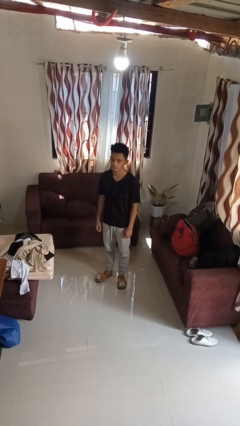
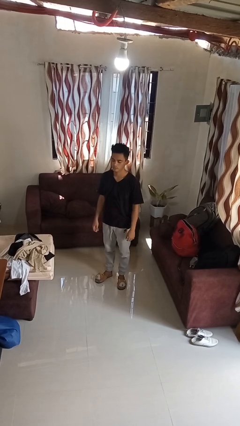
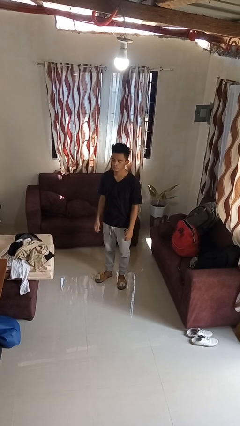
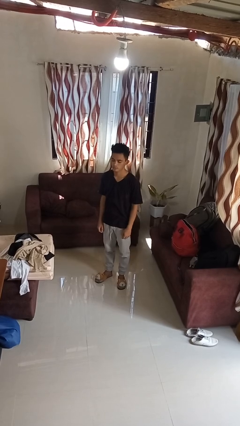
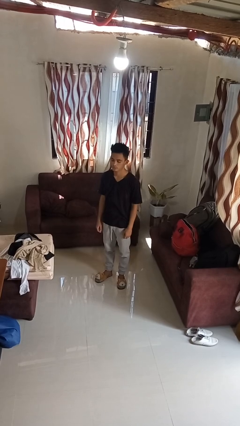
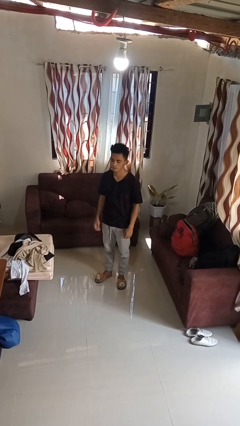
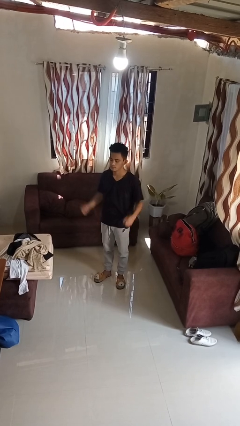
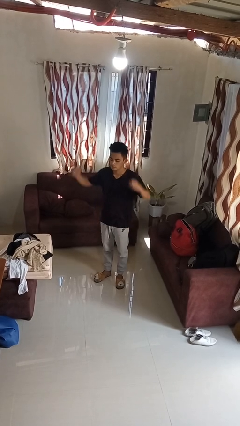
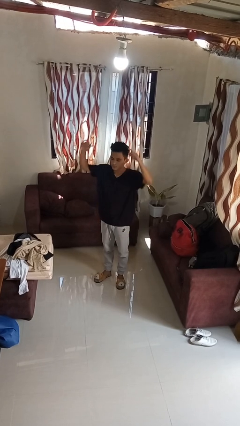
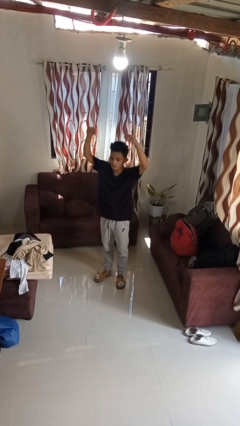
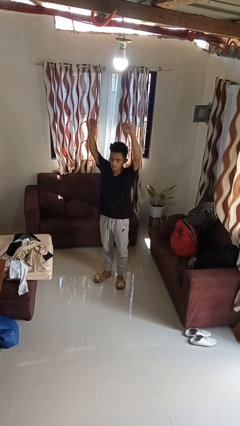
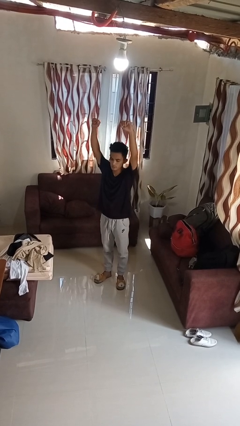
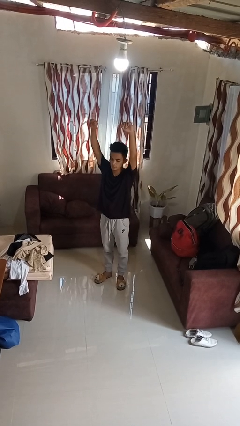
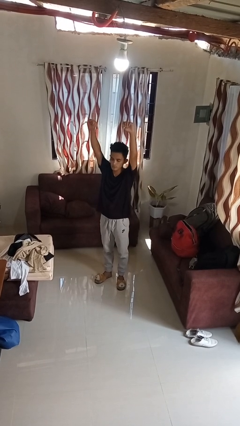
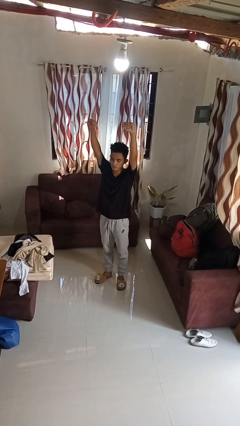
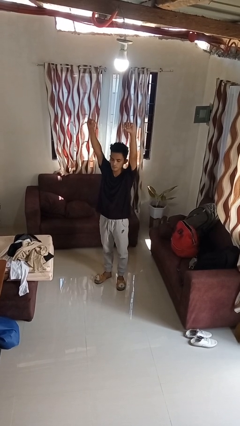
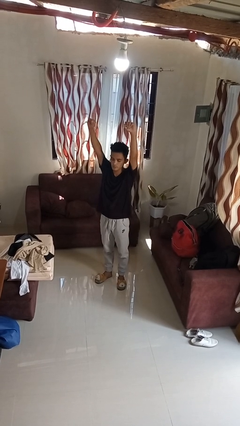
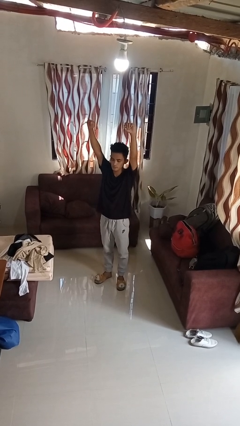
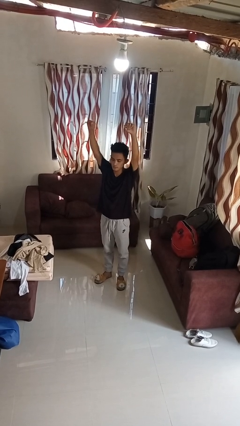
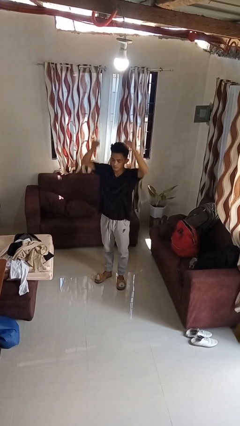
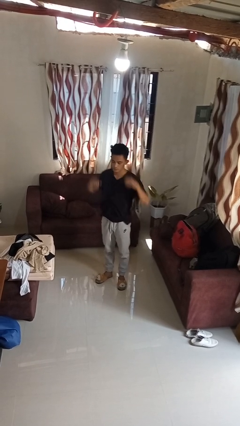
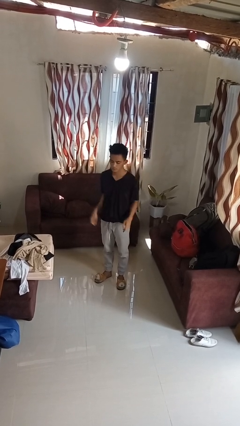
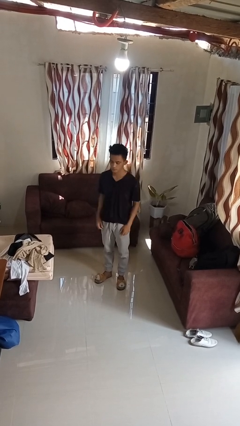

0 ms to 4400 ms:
person stretches arms over head

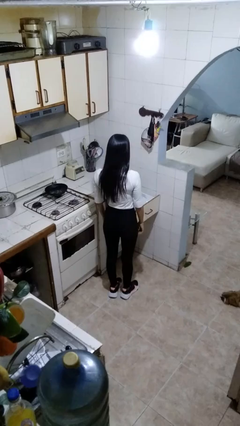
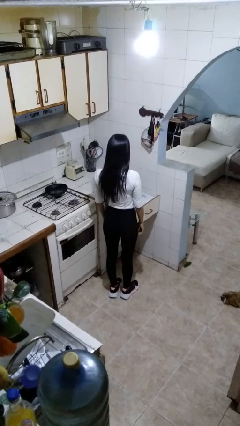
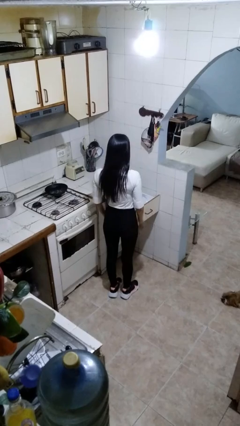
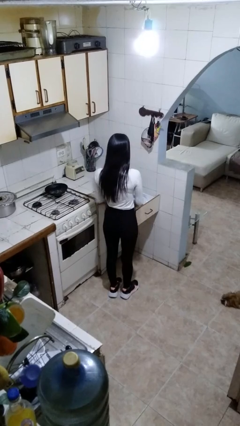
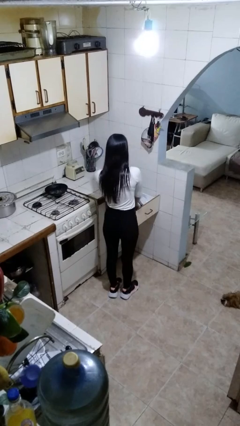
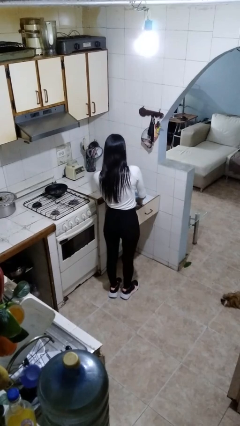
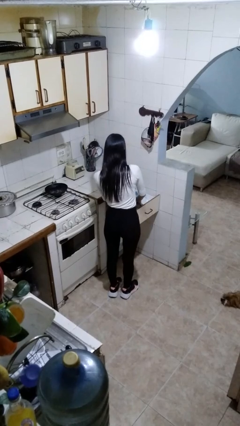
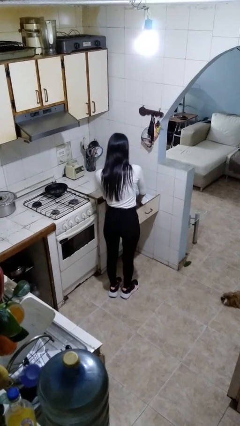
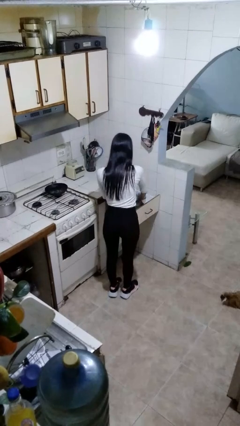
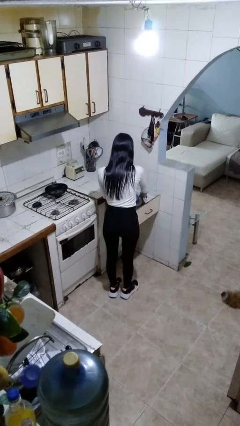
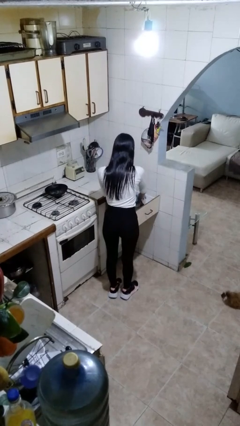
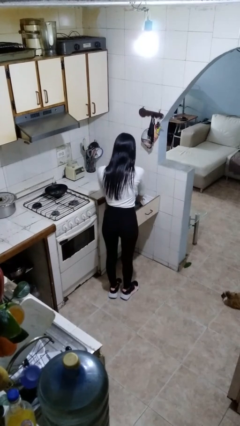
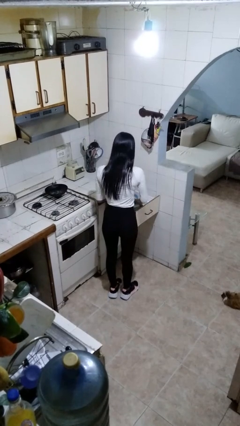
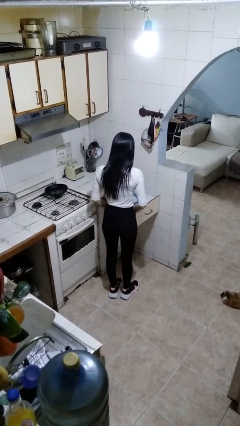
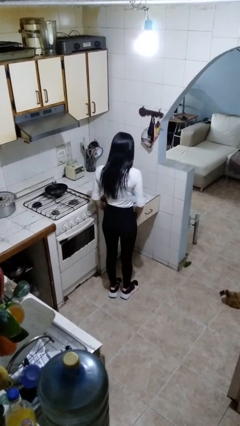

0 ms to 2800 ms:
person searches in kitchen drawer

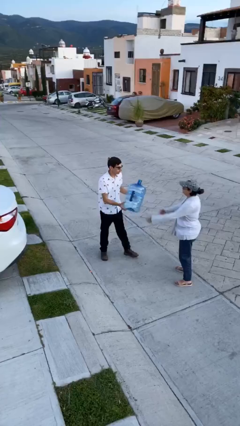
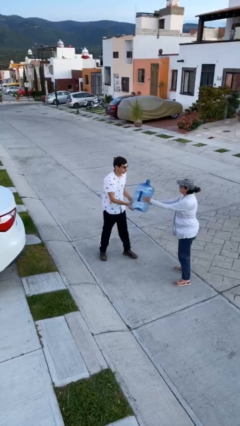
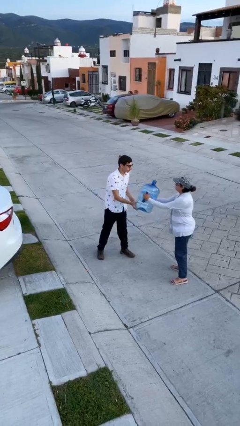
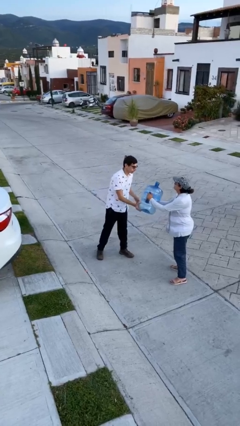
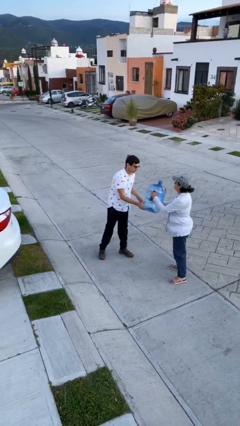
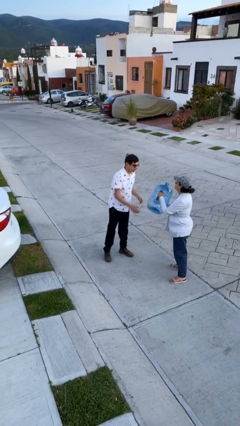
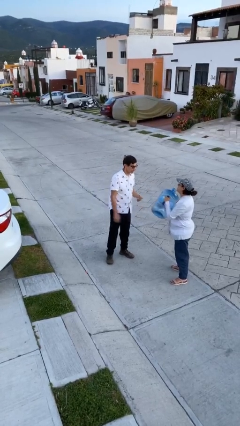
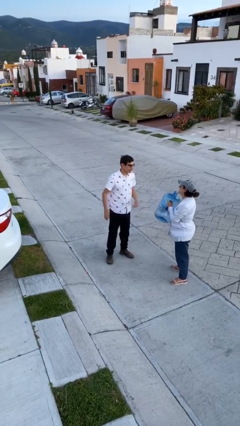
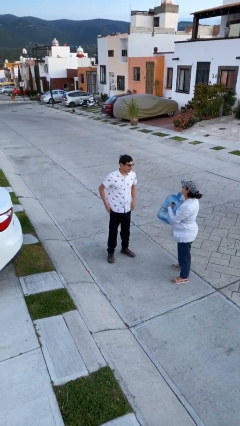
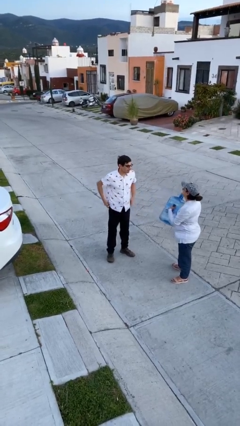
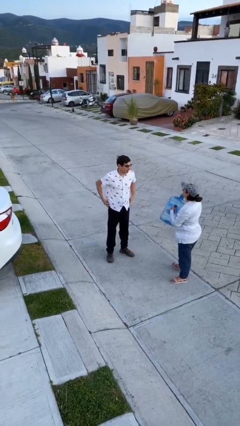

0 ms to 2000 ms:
person transfers object to person

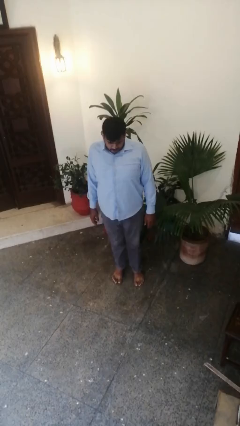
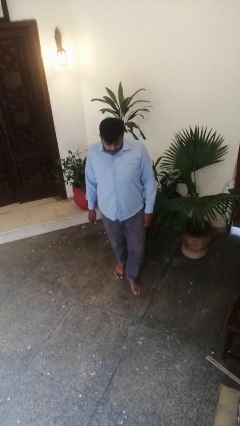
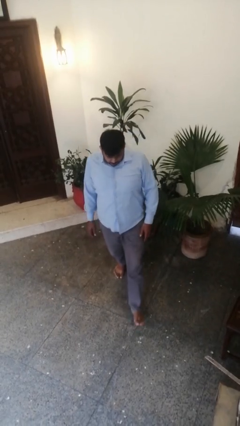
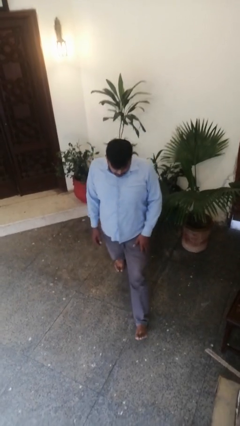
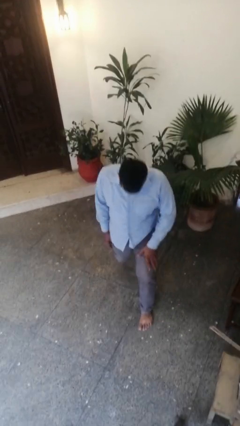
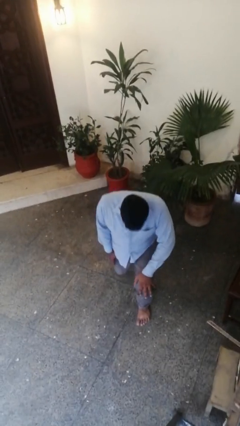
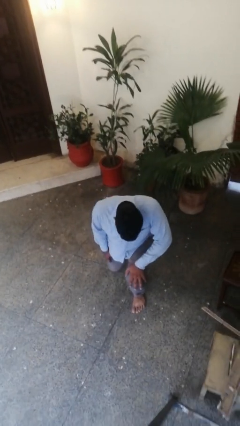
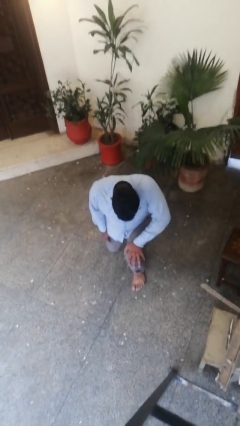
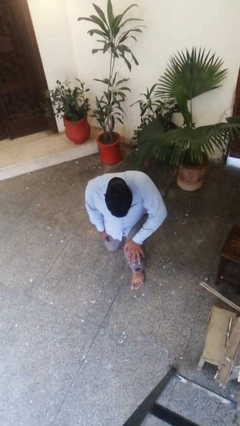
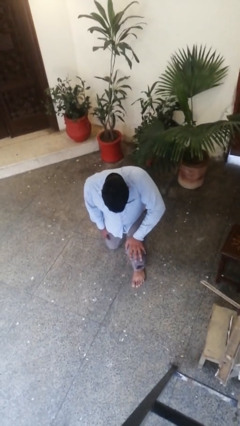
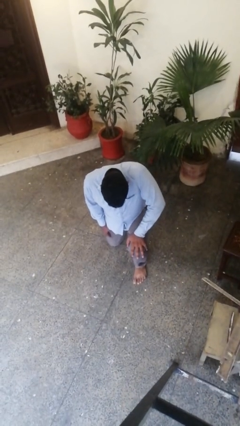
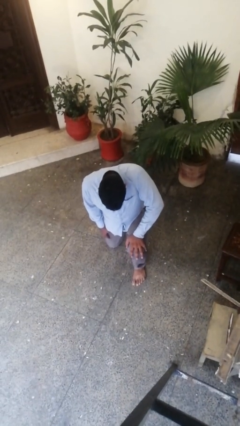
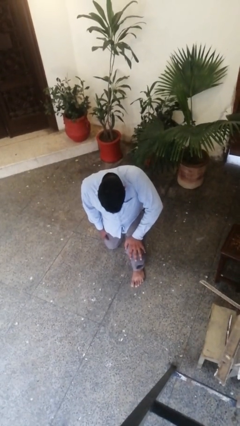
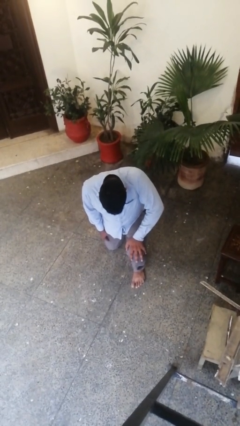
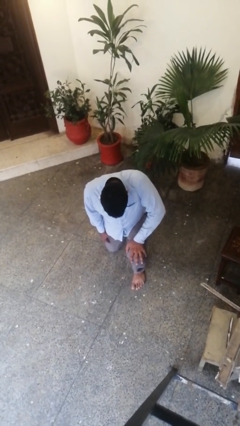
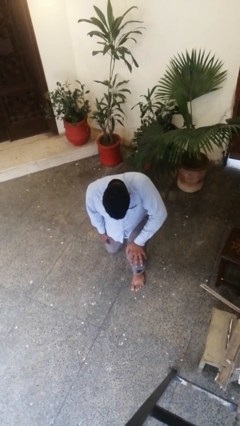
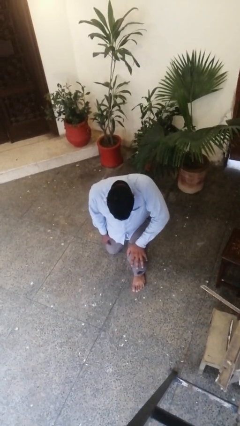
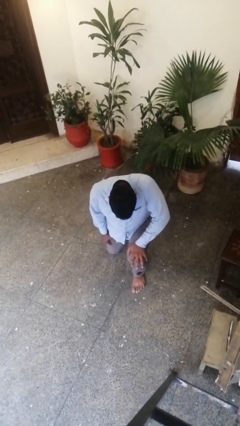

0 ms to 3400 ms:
person kneels

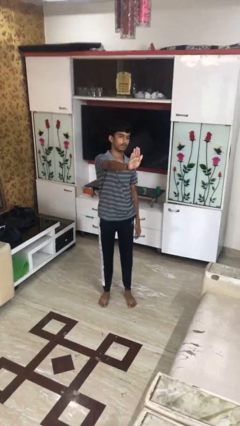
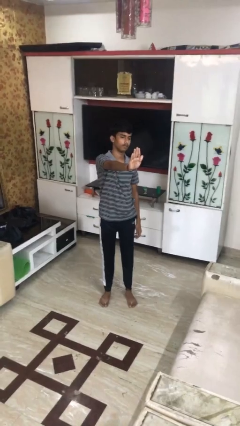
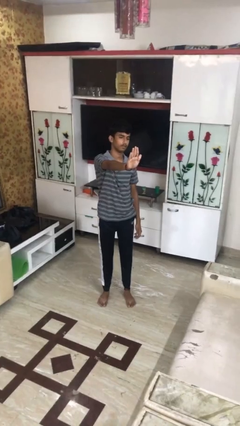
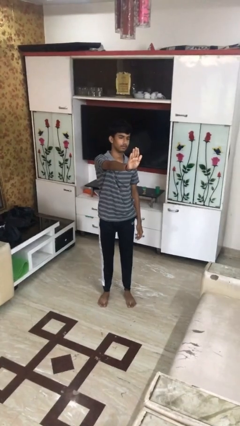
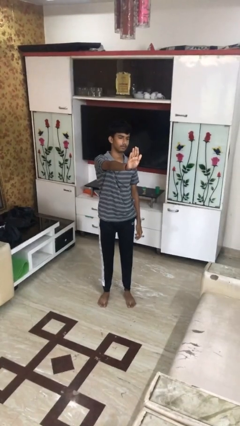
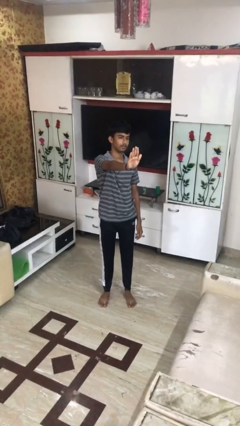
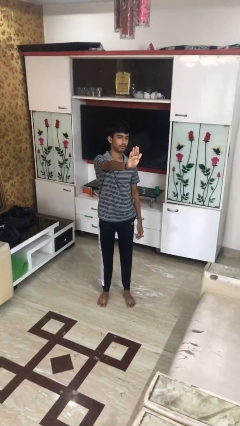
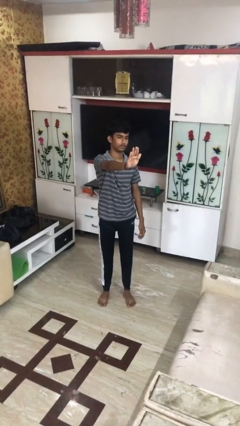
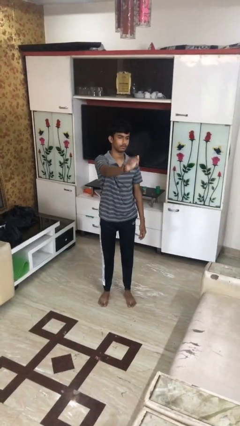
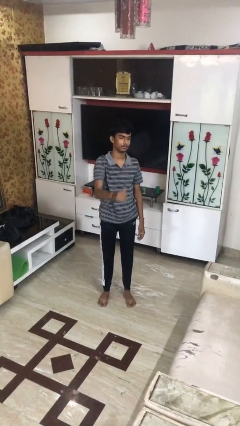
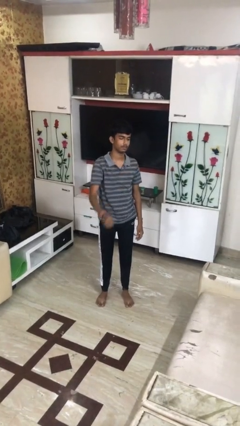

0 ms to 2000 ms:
person gestures stop

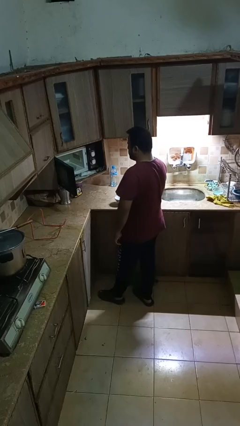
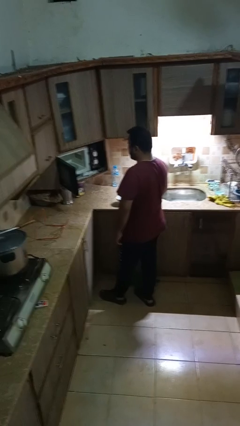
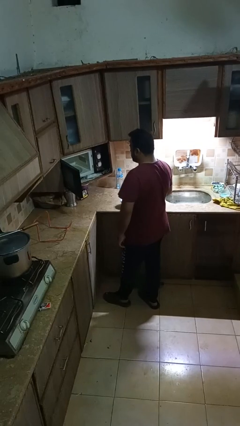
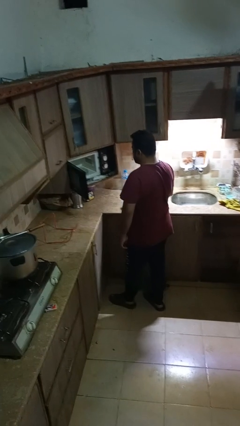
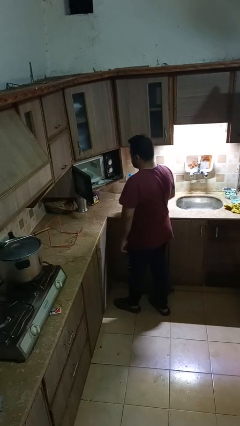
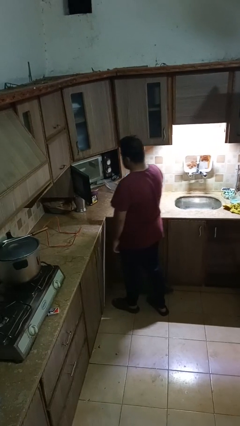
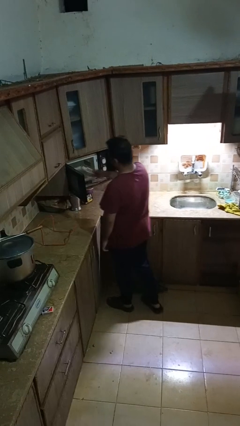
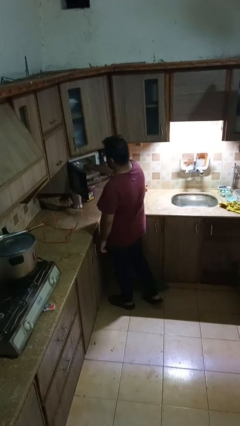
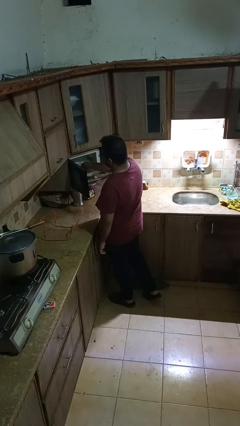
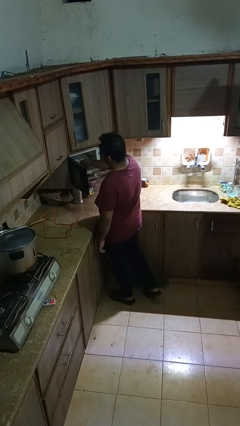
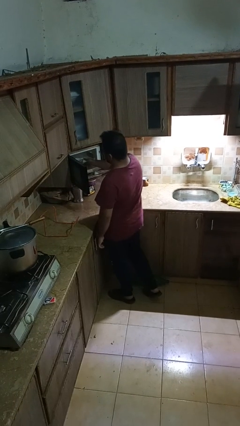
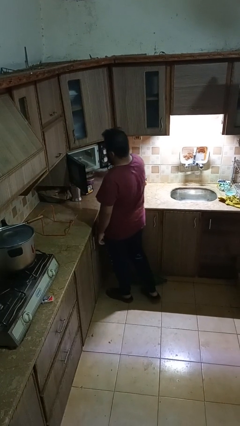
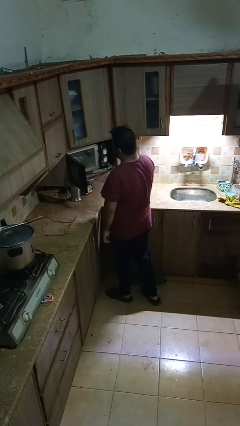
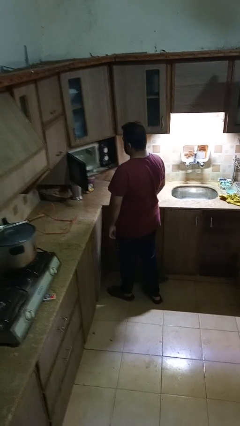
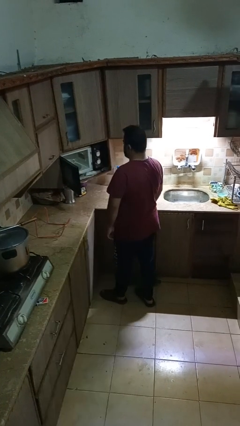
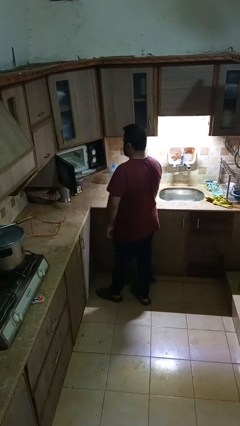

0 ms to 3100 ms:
person puts object into microwave
